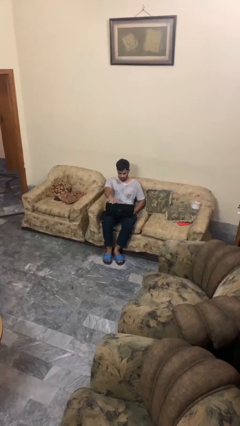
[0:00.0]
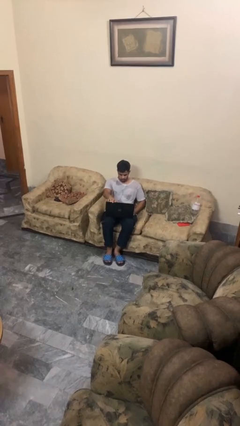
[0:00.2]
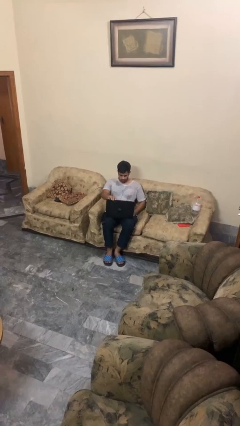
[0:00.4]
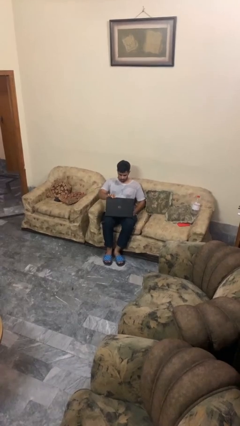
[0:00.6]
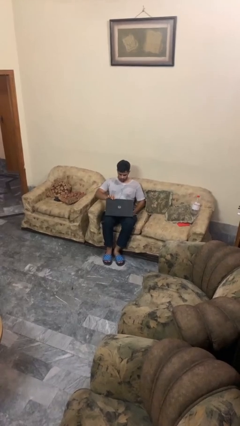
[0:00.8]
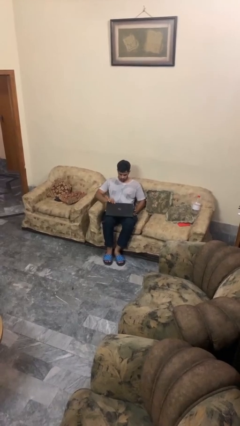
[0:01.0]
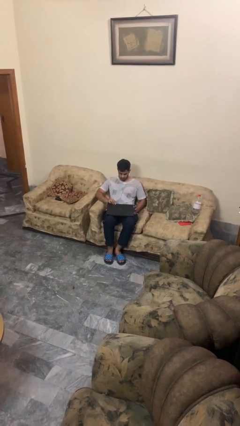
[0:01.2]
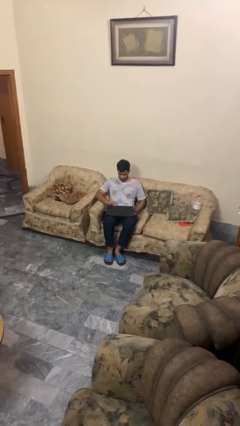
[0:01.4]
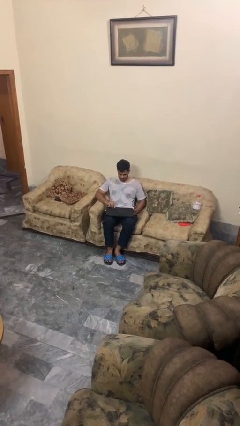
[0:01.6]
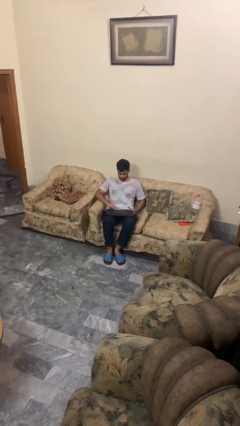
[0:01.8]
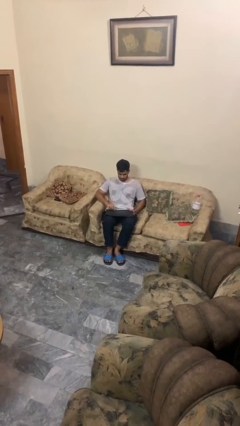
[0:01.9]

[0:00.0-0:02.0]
person closes laptop

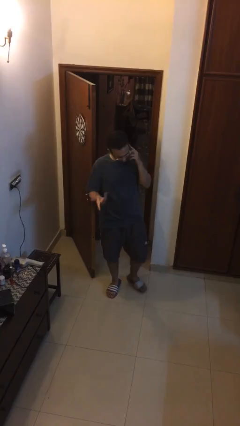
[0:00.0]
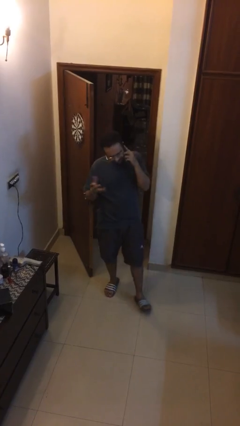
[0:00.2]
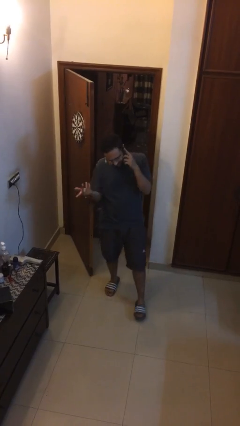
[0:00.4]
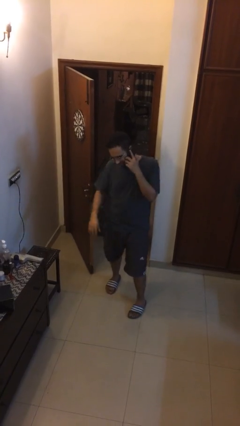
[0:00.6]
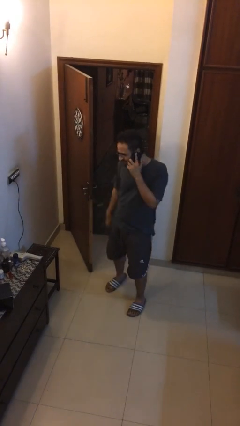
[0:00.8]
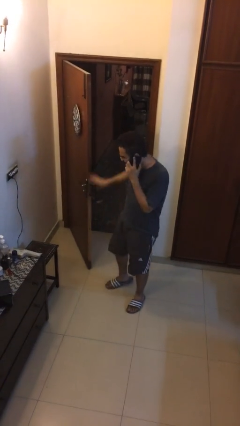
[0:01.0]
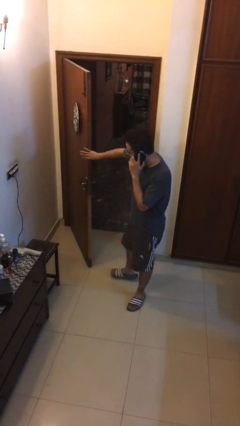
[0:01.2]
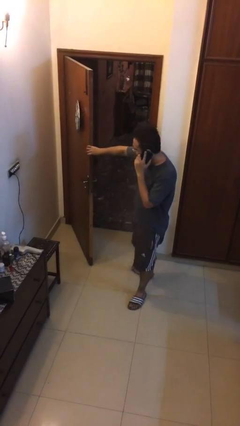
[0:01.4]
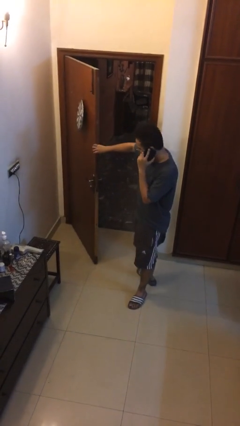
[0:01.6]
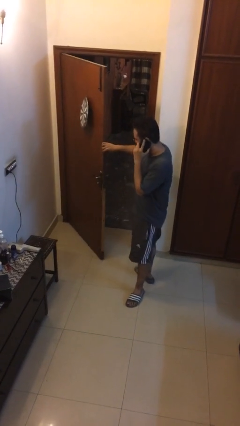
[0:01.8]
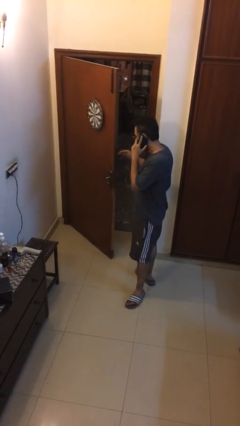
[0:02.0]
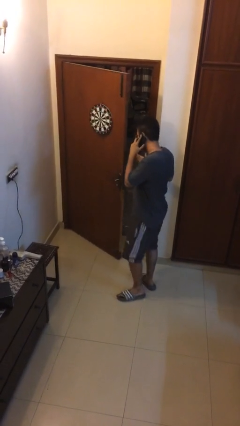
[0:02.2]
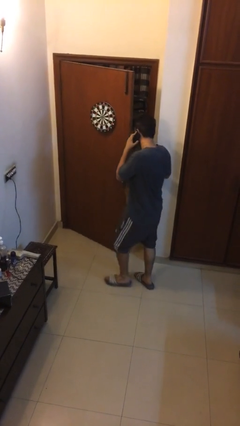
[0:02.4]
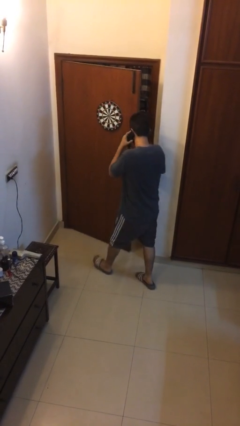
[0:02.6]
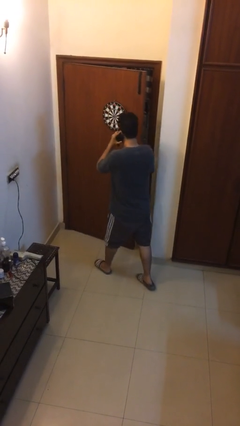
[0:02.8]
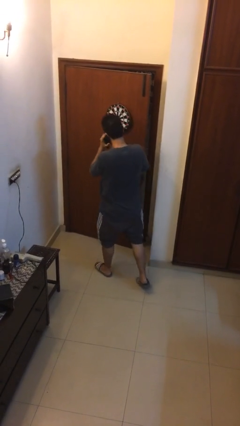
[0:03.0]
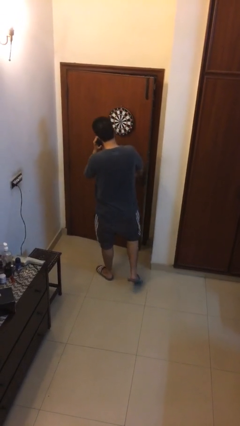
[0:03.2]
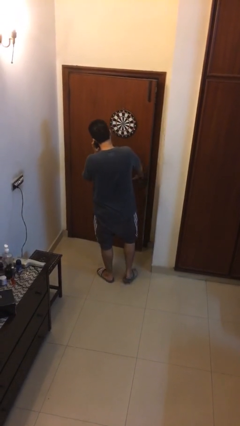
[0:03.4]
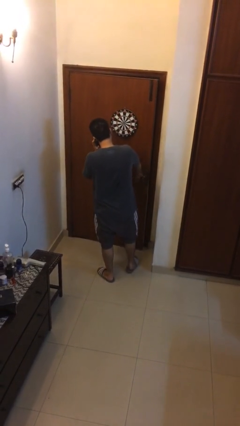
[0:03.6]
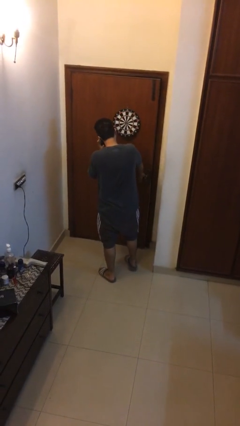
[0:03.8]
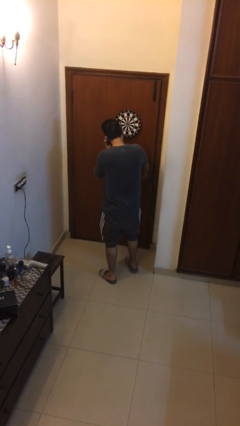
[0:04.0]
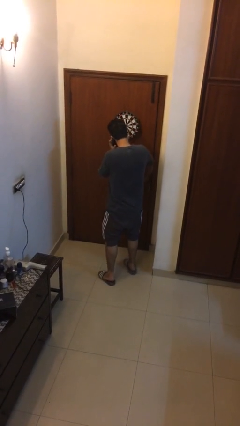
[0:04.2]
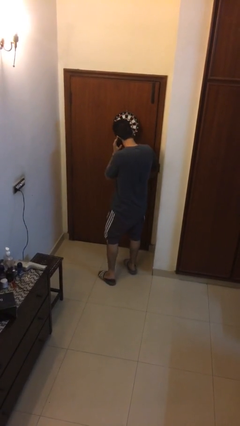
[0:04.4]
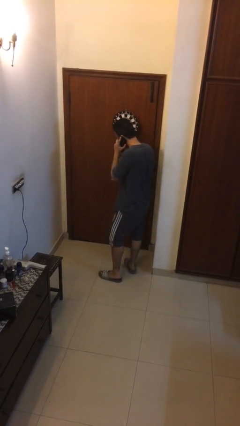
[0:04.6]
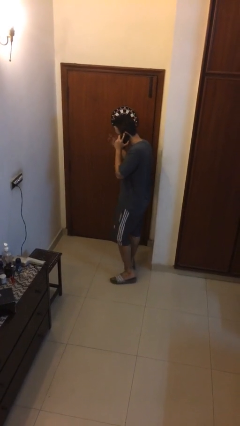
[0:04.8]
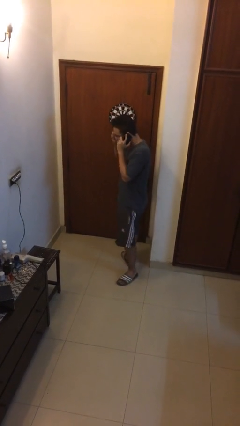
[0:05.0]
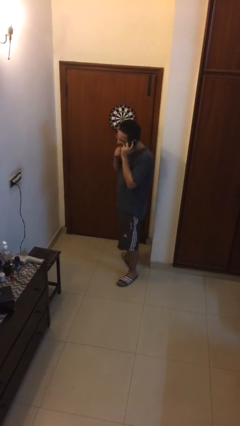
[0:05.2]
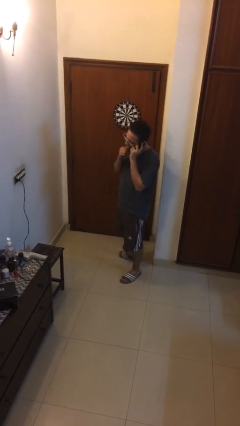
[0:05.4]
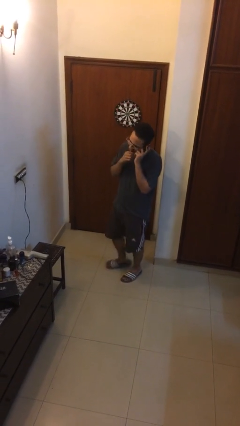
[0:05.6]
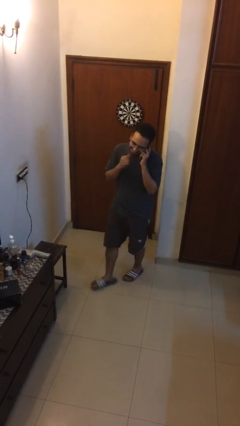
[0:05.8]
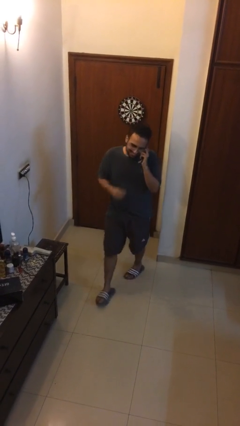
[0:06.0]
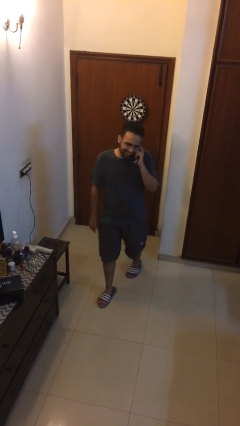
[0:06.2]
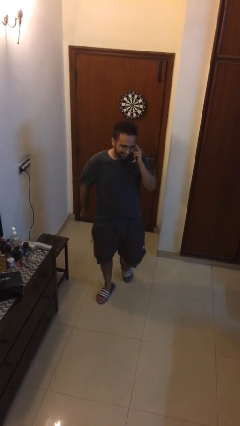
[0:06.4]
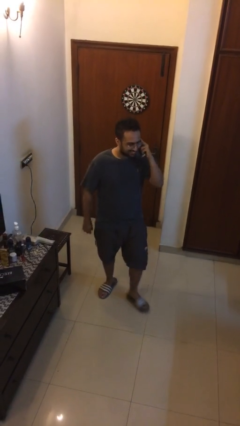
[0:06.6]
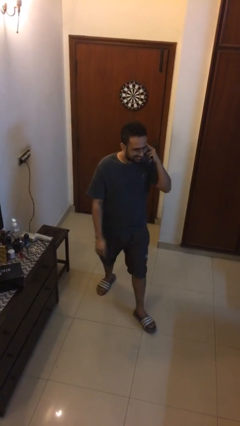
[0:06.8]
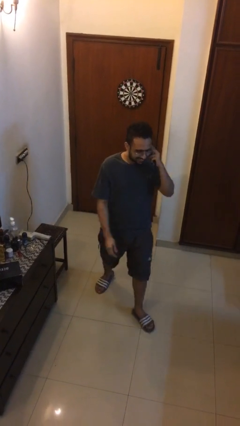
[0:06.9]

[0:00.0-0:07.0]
person closes facility door

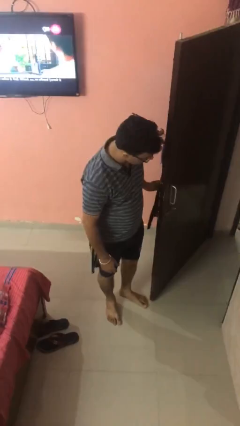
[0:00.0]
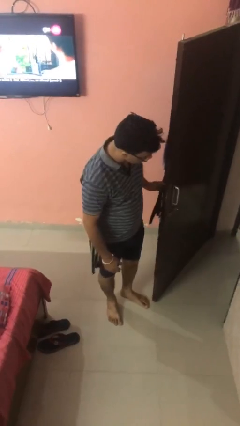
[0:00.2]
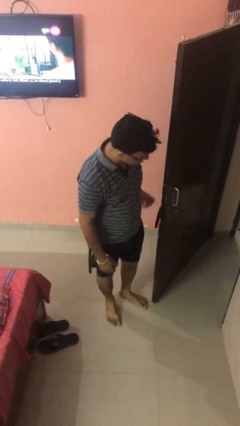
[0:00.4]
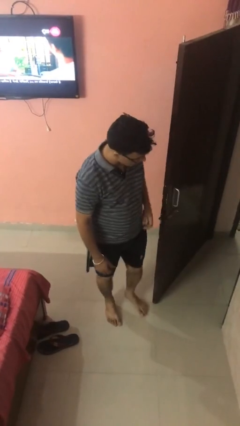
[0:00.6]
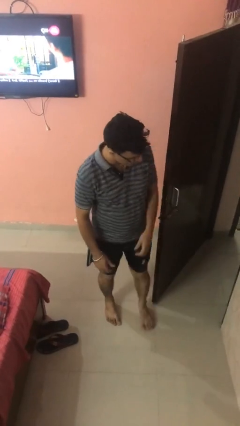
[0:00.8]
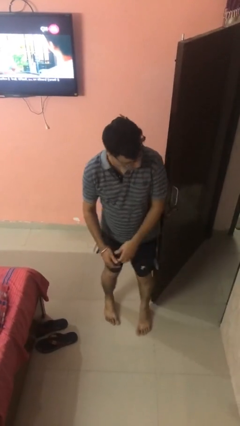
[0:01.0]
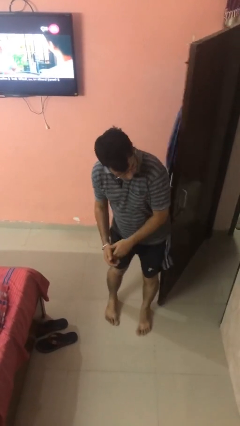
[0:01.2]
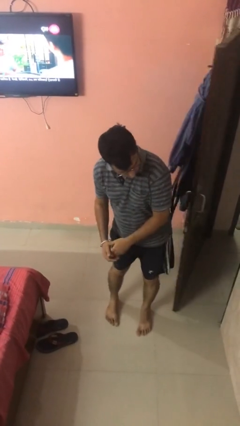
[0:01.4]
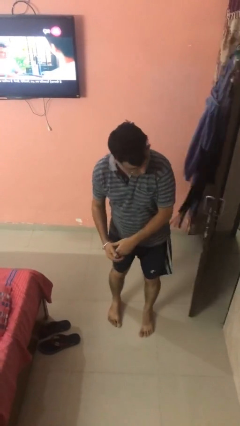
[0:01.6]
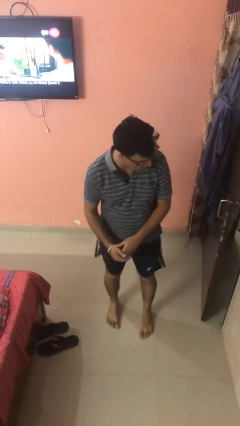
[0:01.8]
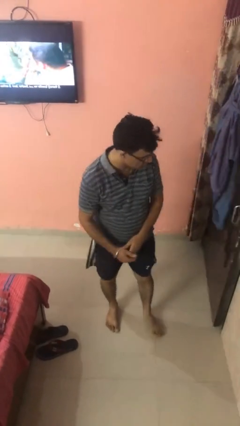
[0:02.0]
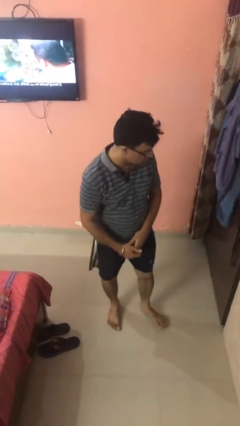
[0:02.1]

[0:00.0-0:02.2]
person closes door with hip

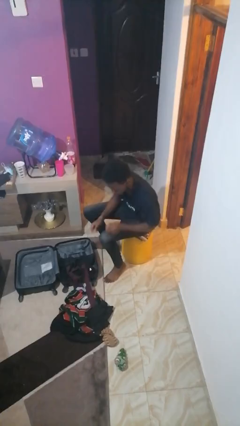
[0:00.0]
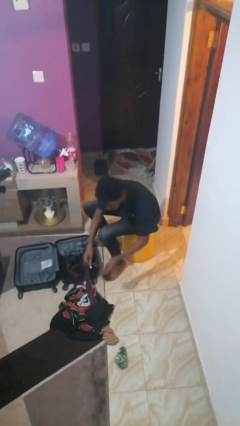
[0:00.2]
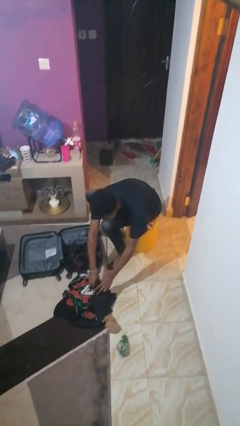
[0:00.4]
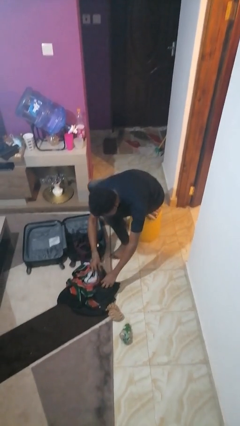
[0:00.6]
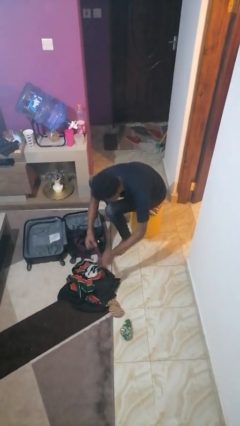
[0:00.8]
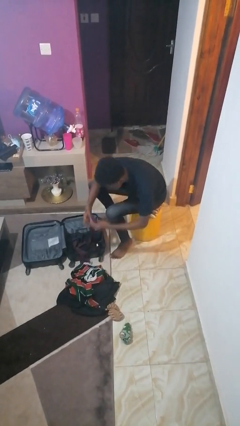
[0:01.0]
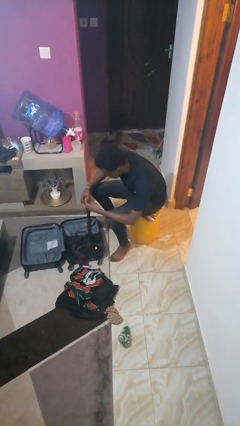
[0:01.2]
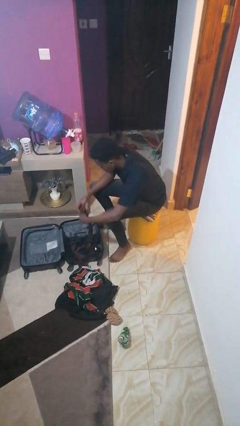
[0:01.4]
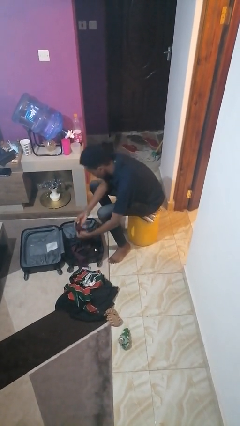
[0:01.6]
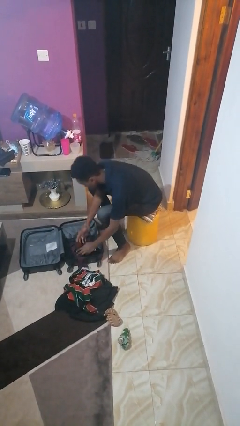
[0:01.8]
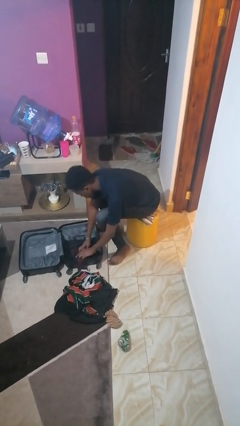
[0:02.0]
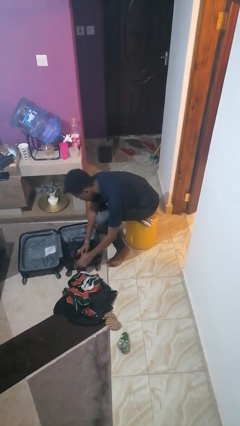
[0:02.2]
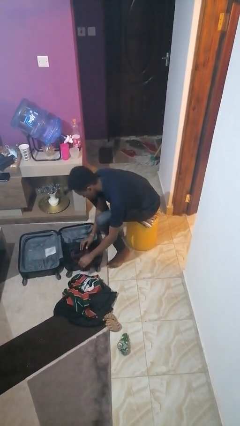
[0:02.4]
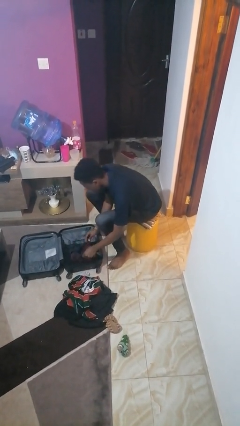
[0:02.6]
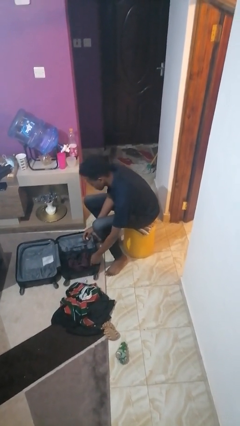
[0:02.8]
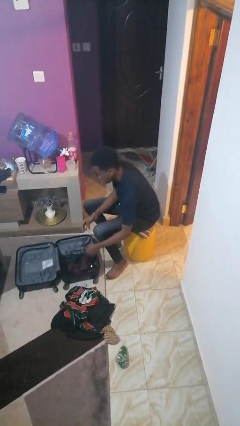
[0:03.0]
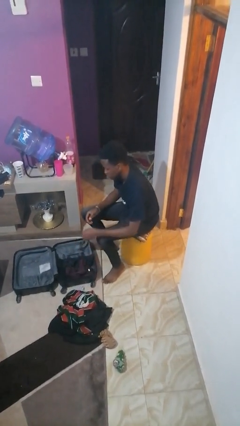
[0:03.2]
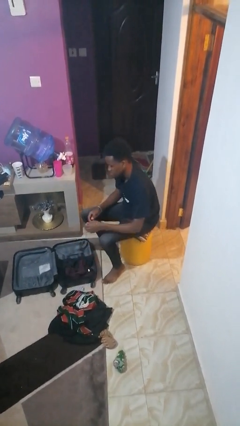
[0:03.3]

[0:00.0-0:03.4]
person loads clothes into suitcase

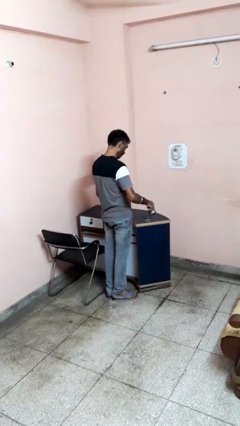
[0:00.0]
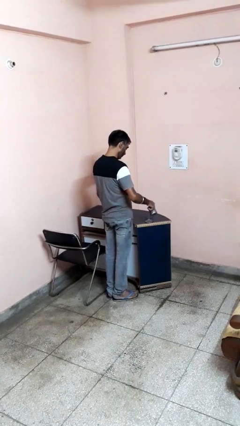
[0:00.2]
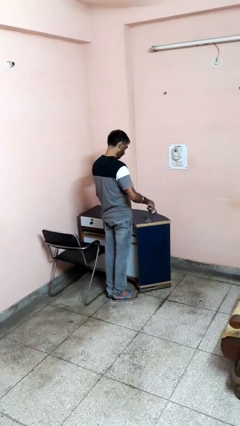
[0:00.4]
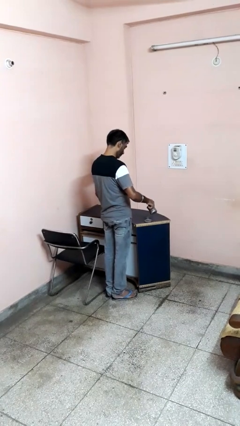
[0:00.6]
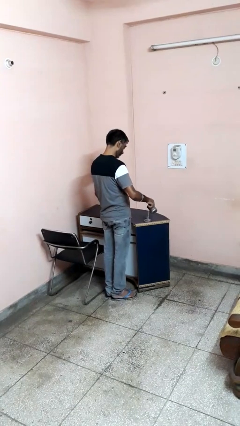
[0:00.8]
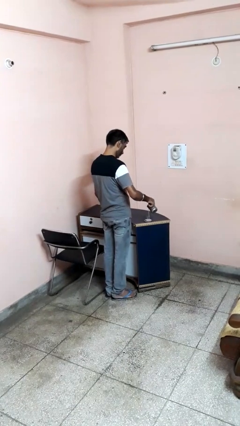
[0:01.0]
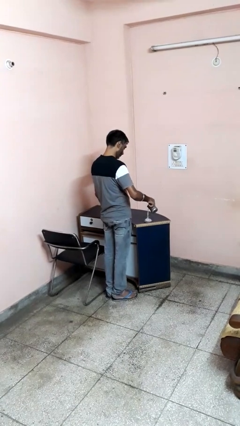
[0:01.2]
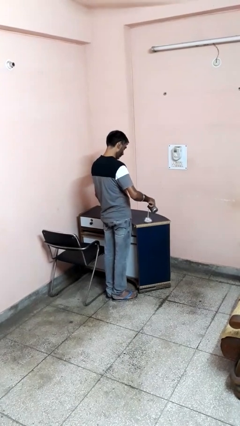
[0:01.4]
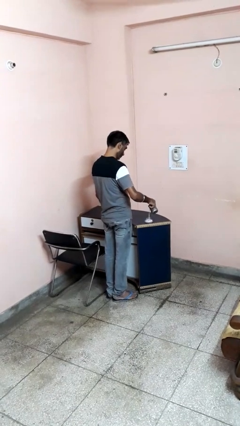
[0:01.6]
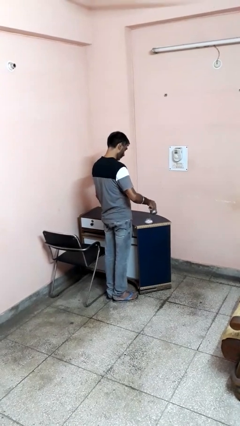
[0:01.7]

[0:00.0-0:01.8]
person pours into bowl

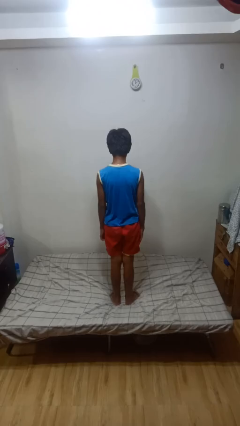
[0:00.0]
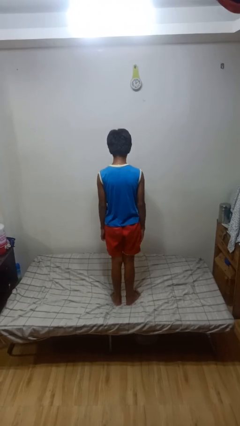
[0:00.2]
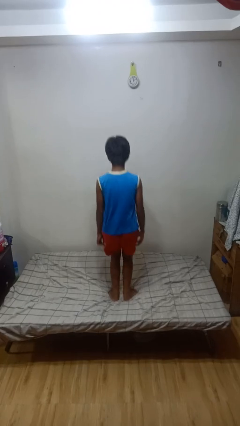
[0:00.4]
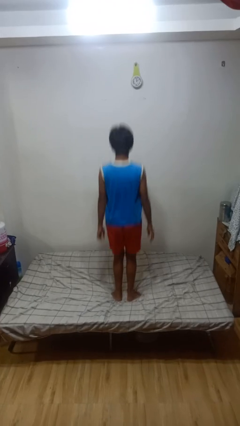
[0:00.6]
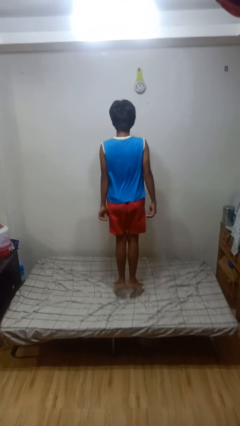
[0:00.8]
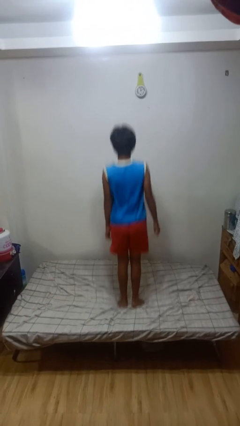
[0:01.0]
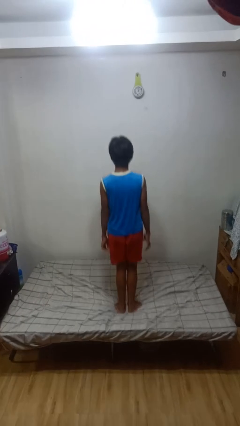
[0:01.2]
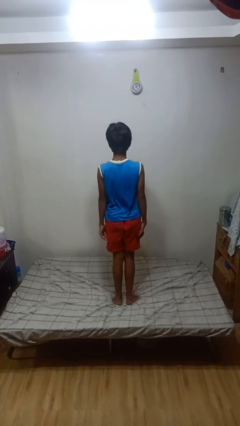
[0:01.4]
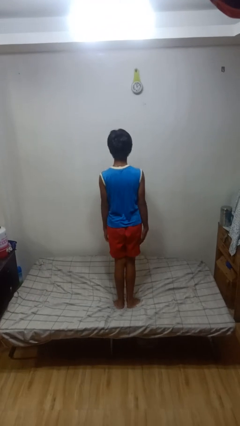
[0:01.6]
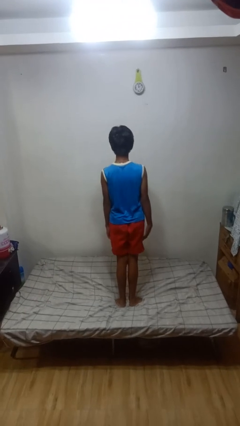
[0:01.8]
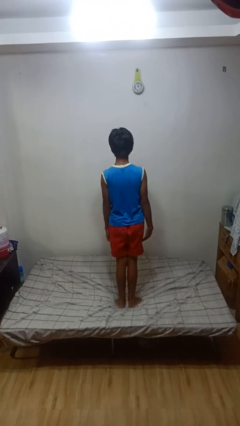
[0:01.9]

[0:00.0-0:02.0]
person jumps on bed
